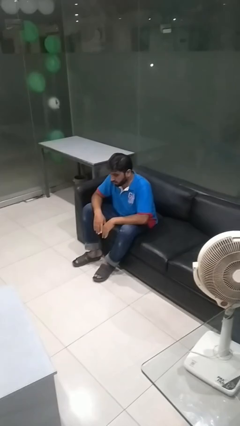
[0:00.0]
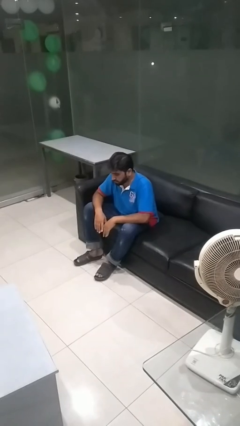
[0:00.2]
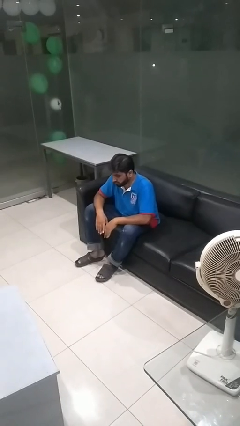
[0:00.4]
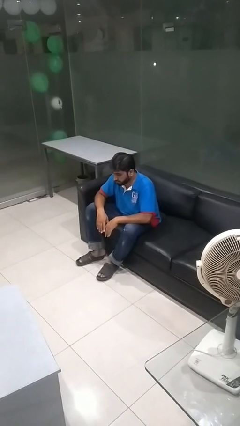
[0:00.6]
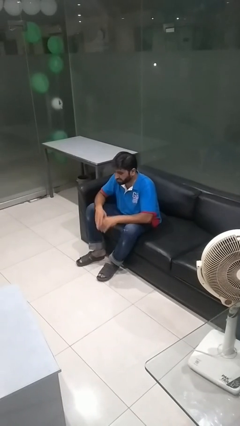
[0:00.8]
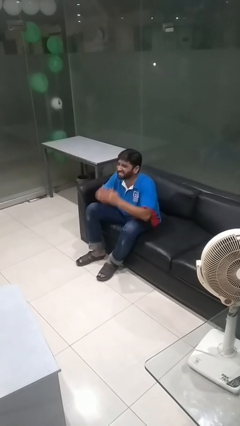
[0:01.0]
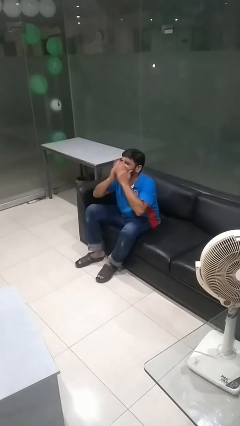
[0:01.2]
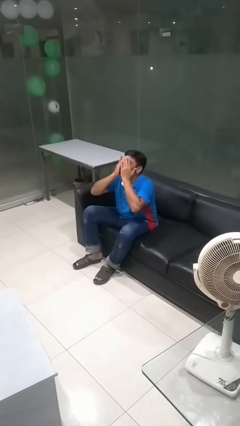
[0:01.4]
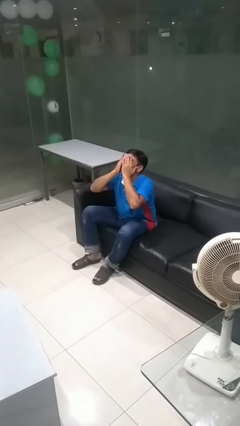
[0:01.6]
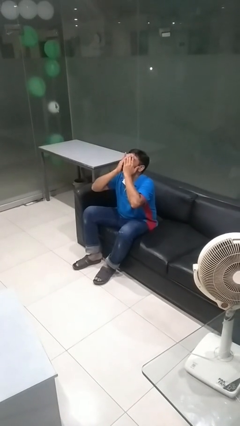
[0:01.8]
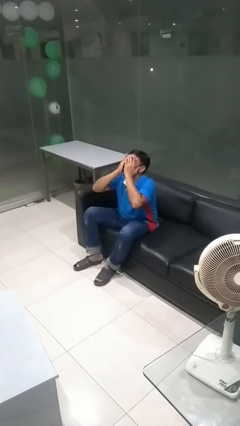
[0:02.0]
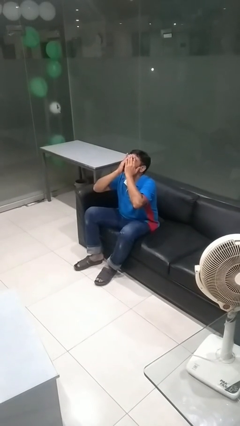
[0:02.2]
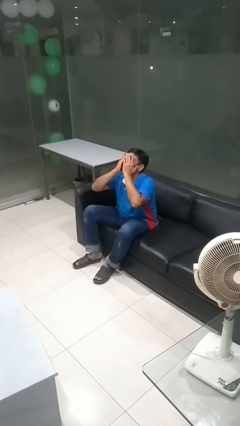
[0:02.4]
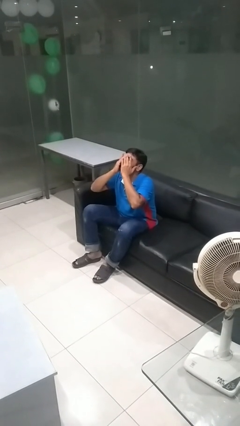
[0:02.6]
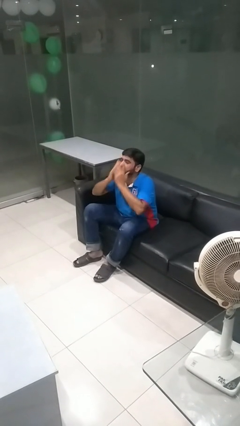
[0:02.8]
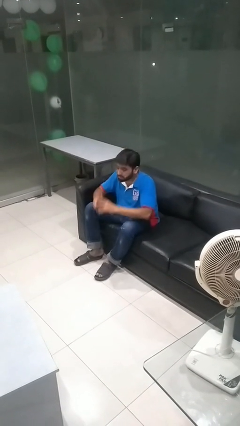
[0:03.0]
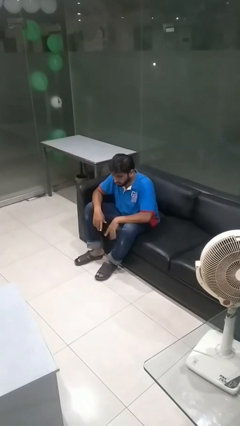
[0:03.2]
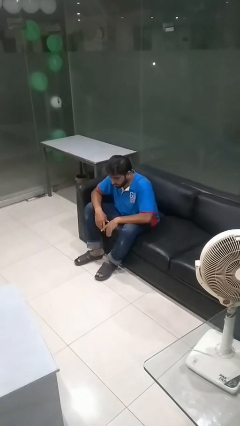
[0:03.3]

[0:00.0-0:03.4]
person covers face with hands

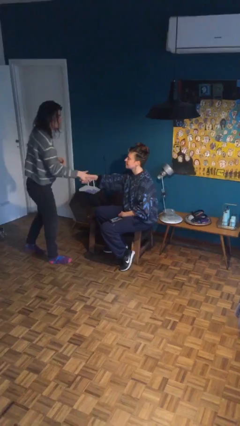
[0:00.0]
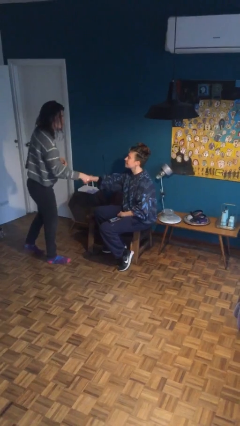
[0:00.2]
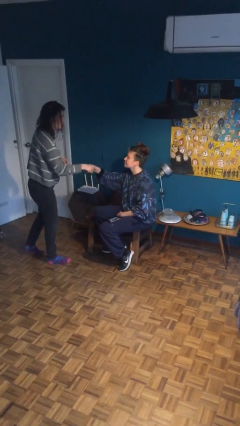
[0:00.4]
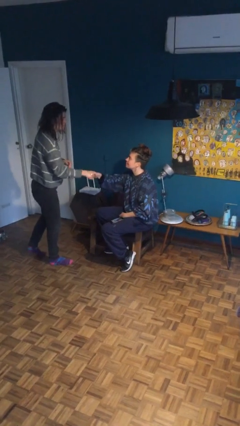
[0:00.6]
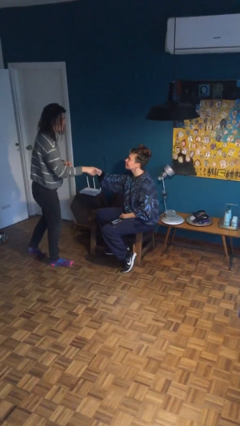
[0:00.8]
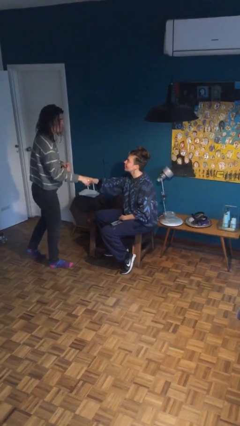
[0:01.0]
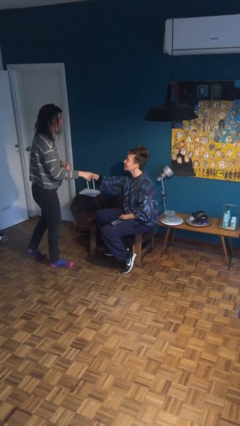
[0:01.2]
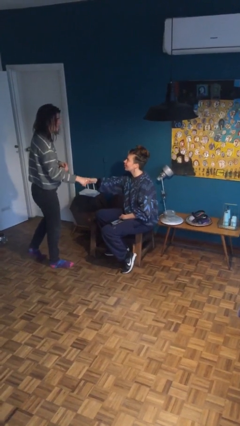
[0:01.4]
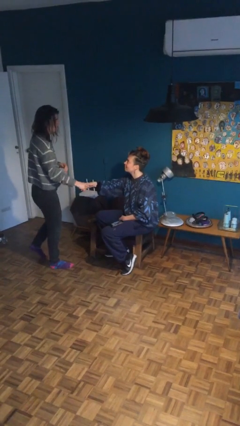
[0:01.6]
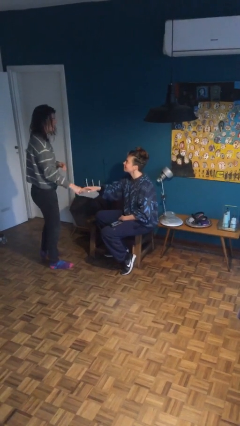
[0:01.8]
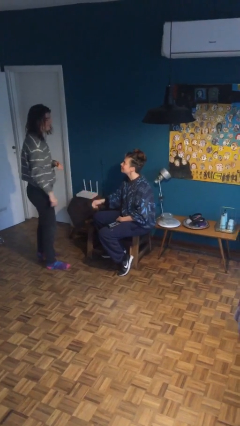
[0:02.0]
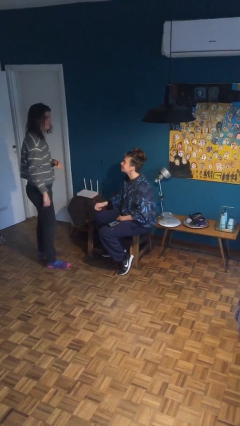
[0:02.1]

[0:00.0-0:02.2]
person shakes hand

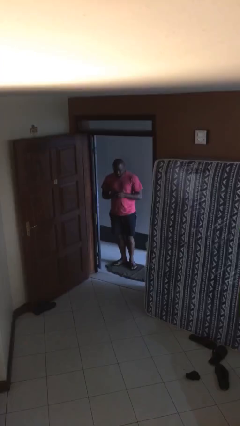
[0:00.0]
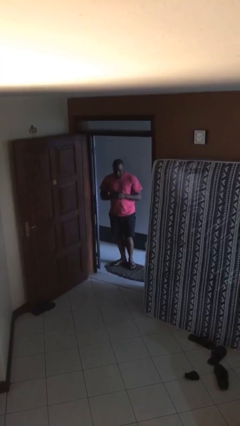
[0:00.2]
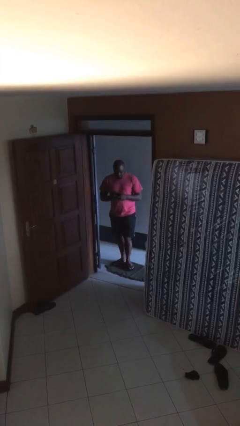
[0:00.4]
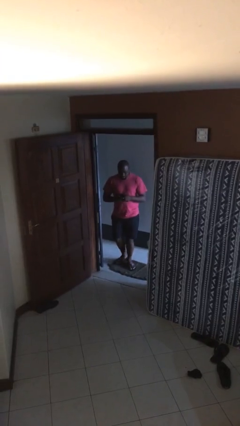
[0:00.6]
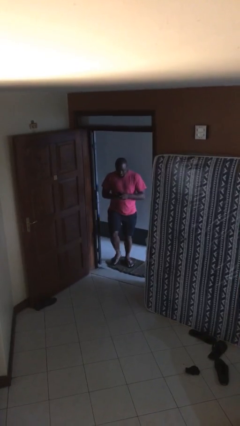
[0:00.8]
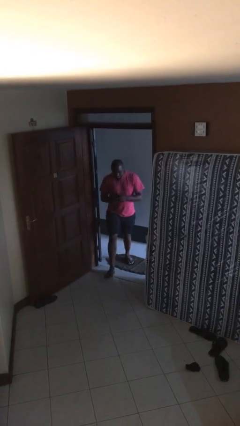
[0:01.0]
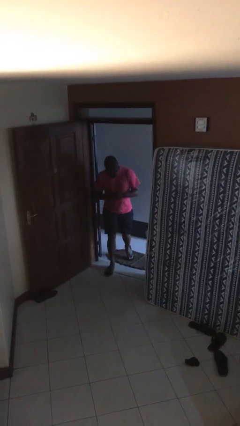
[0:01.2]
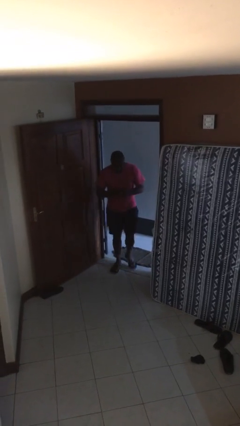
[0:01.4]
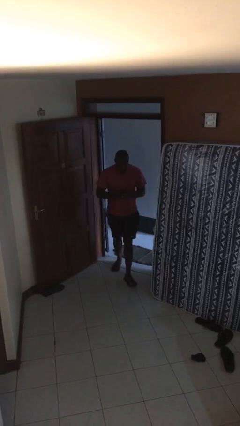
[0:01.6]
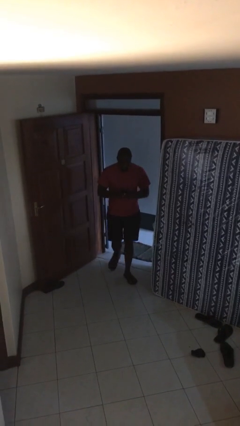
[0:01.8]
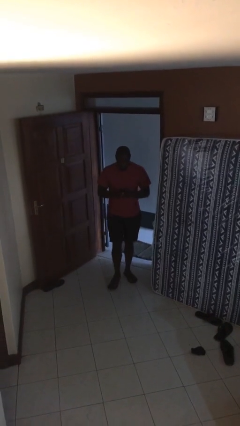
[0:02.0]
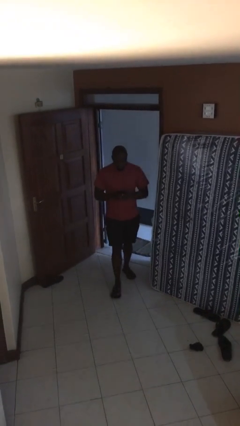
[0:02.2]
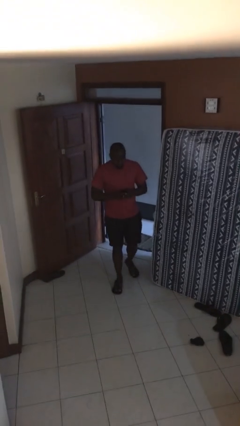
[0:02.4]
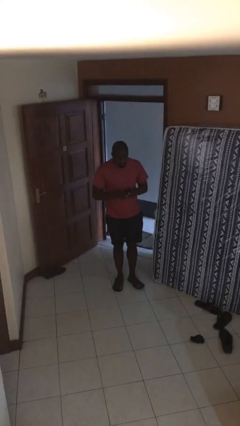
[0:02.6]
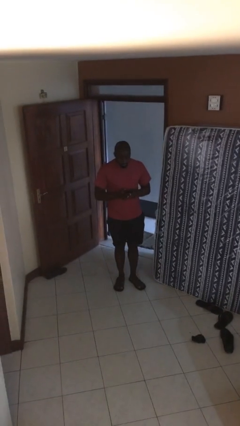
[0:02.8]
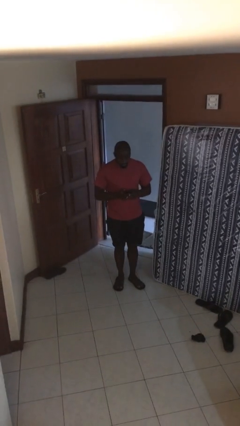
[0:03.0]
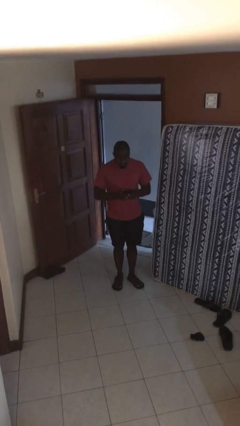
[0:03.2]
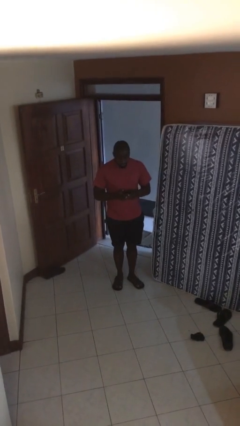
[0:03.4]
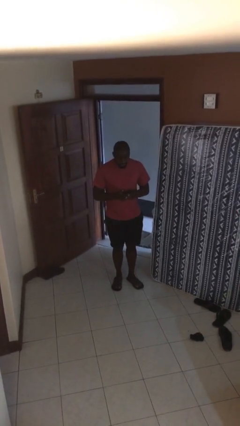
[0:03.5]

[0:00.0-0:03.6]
person enters scene through structure

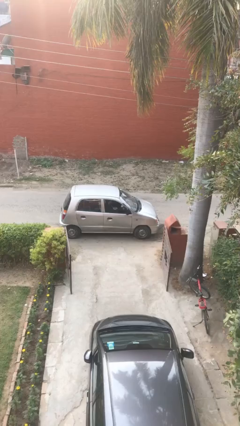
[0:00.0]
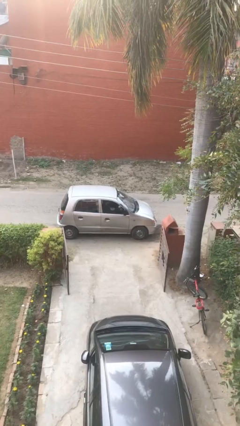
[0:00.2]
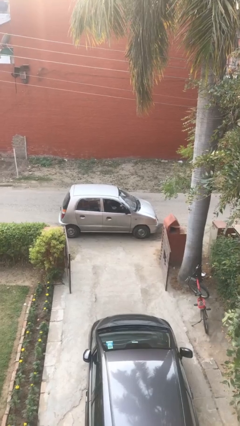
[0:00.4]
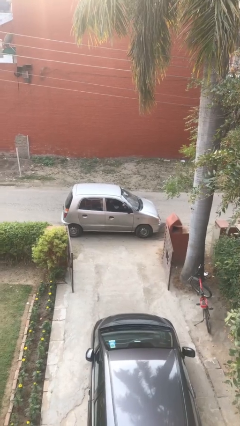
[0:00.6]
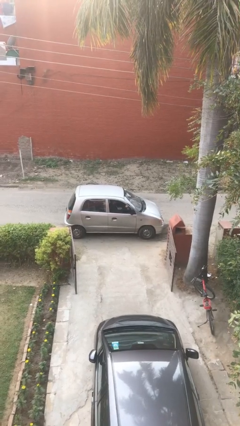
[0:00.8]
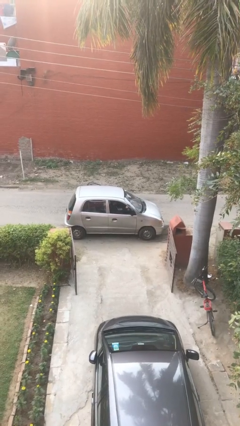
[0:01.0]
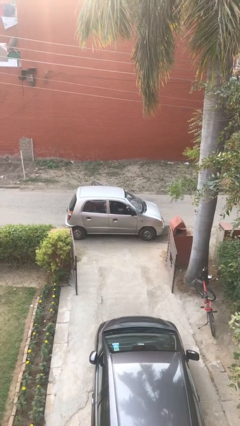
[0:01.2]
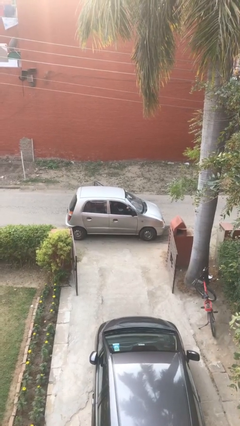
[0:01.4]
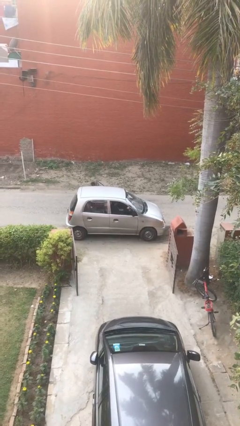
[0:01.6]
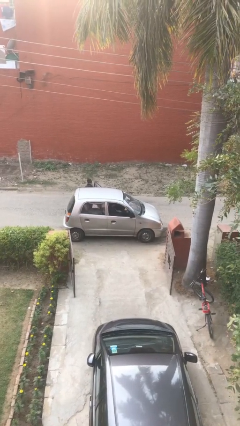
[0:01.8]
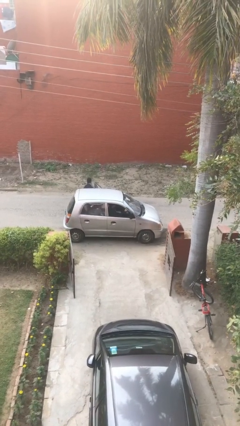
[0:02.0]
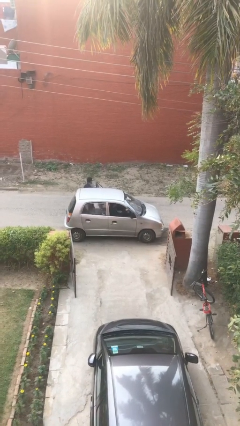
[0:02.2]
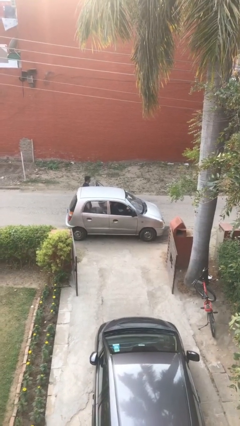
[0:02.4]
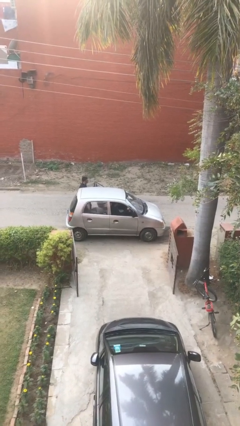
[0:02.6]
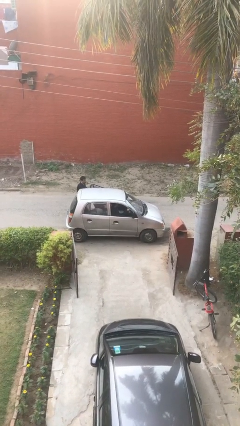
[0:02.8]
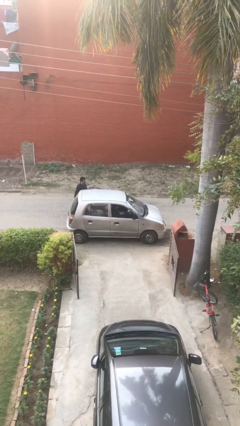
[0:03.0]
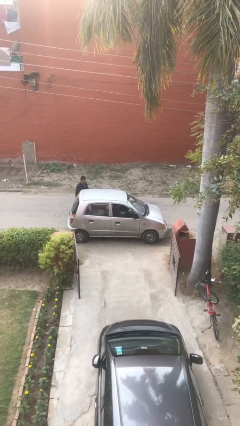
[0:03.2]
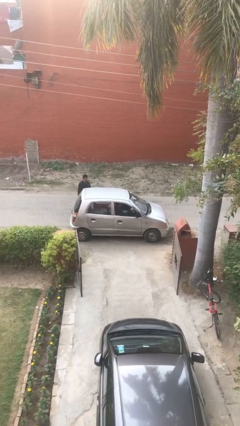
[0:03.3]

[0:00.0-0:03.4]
car drops off person

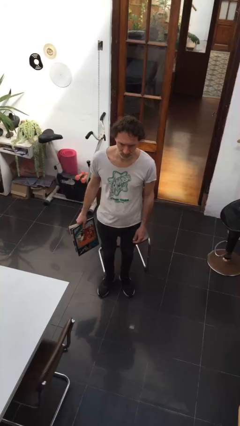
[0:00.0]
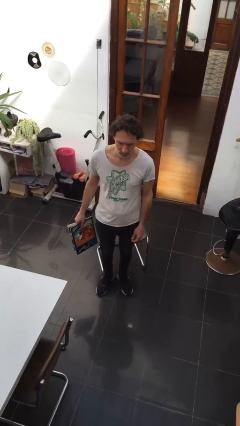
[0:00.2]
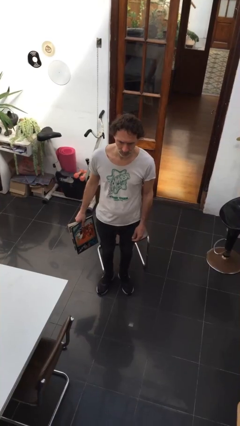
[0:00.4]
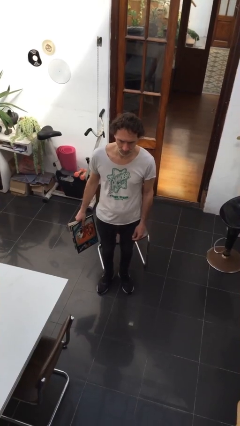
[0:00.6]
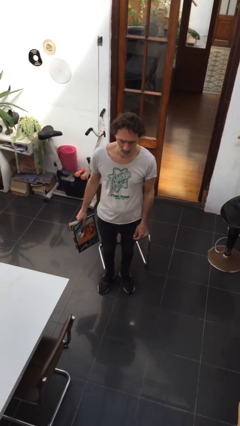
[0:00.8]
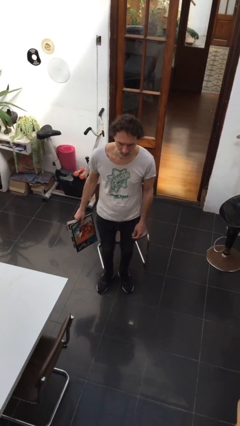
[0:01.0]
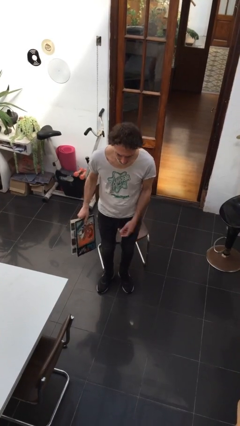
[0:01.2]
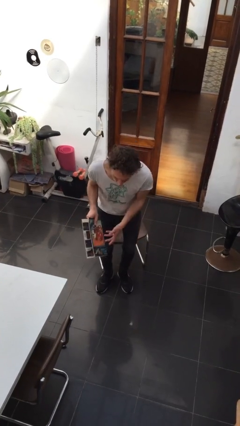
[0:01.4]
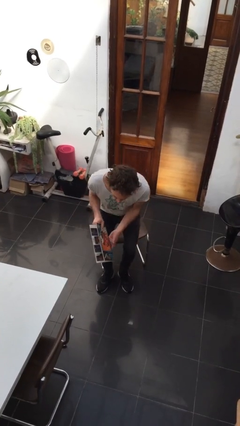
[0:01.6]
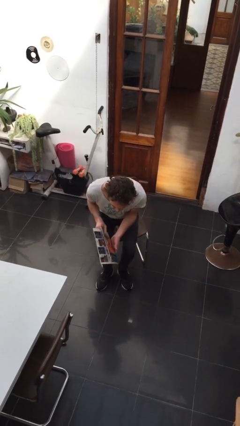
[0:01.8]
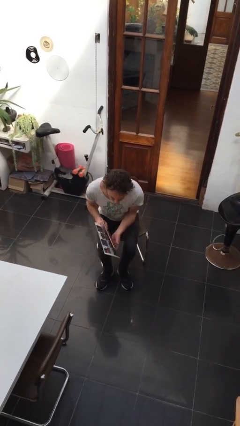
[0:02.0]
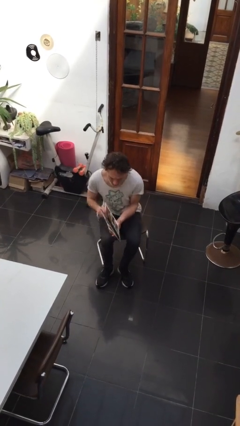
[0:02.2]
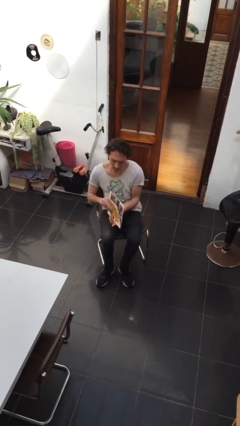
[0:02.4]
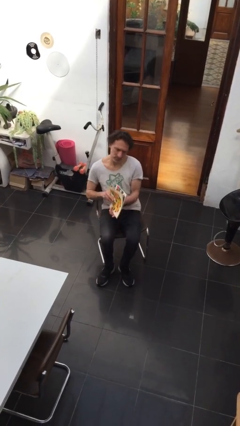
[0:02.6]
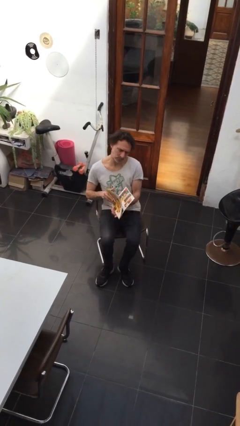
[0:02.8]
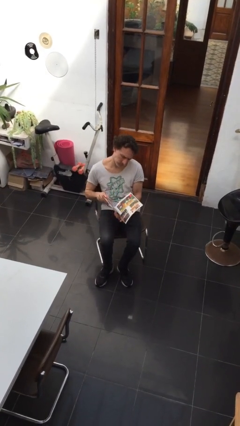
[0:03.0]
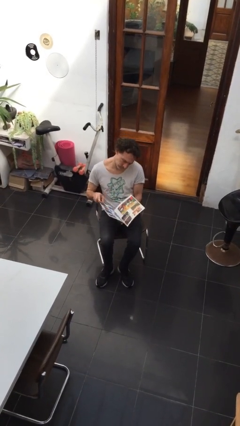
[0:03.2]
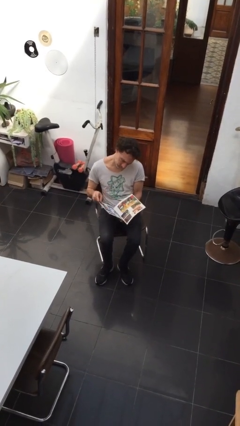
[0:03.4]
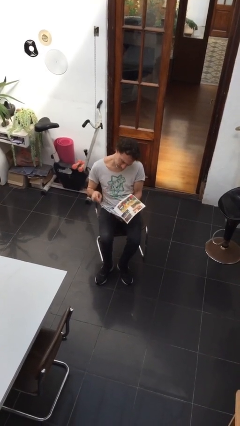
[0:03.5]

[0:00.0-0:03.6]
person sits down

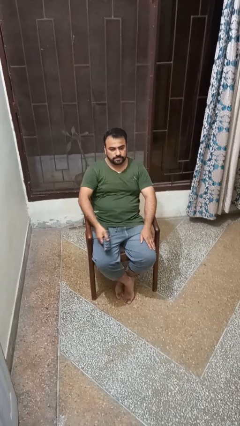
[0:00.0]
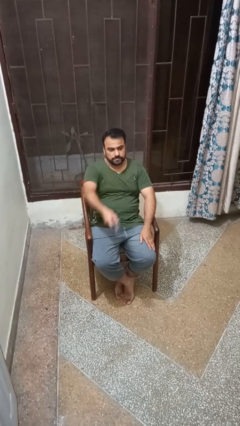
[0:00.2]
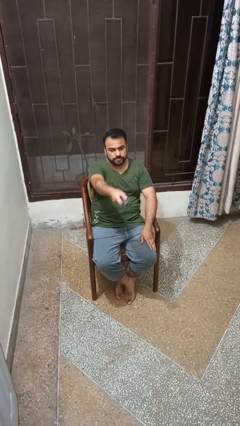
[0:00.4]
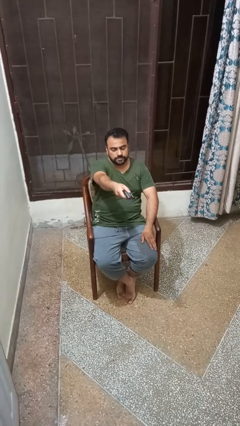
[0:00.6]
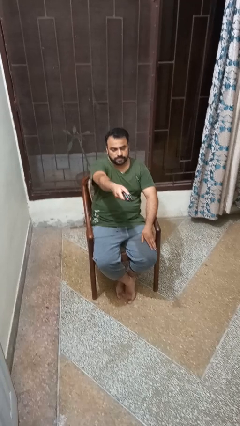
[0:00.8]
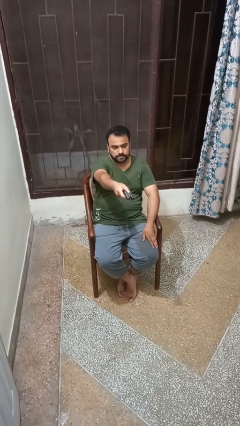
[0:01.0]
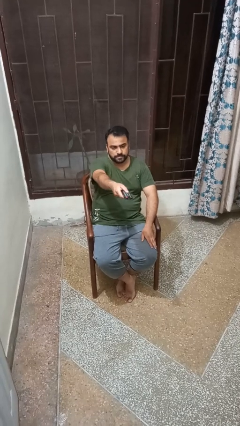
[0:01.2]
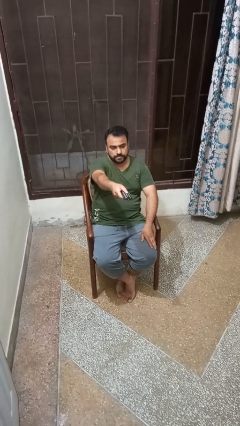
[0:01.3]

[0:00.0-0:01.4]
person uses television remote
